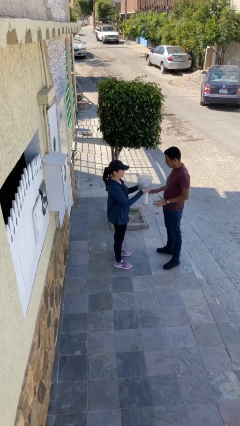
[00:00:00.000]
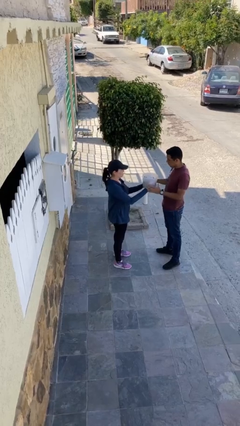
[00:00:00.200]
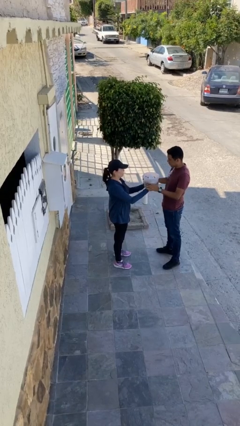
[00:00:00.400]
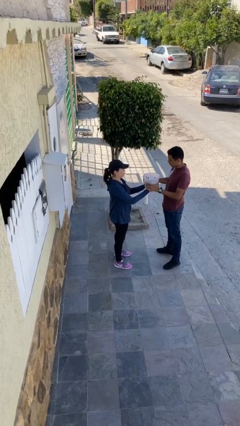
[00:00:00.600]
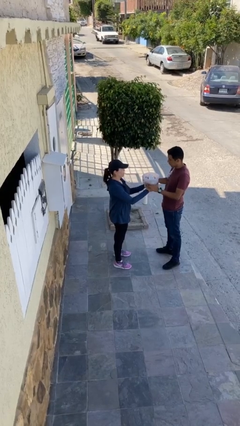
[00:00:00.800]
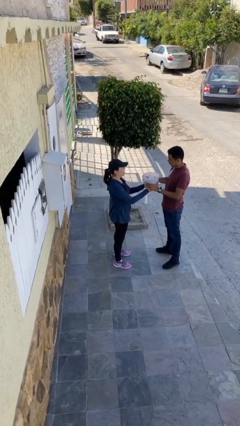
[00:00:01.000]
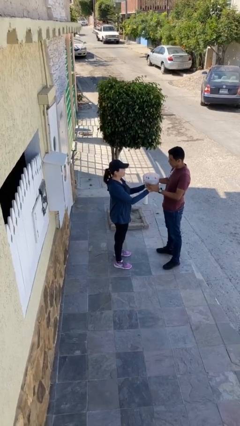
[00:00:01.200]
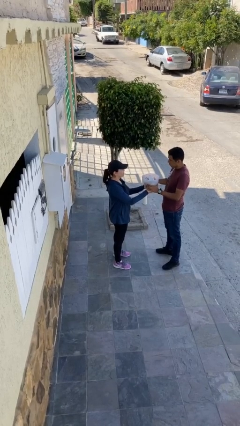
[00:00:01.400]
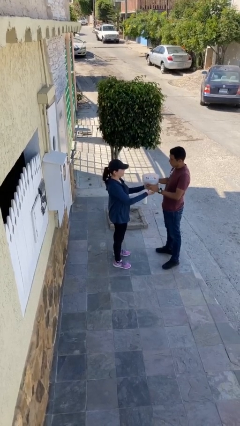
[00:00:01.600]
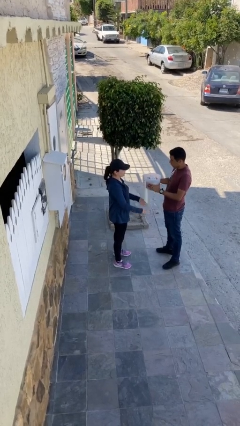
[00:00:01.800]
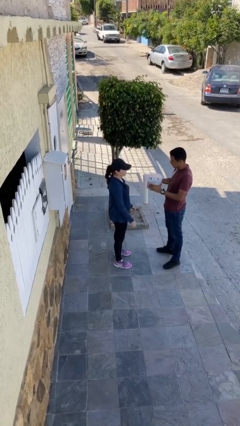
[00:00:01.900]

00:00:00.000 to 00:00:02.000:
person transfers object to person

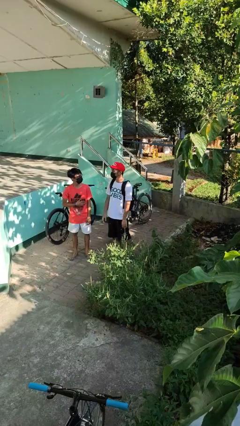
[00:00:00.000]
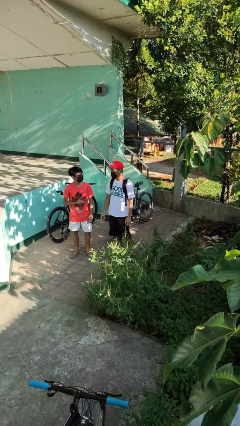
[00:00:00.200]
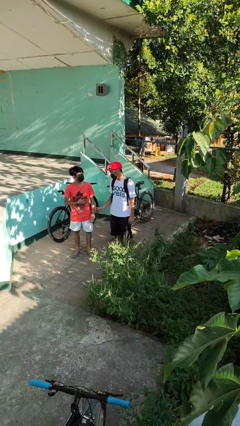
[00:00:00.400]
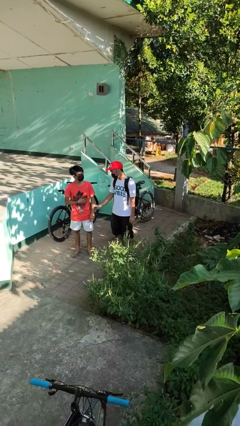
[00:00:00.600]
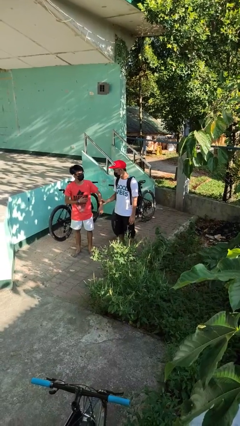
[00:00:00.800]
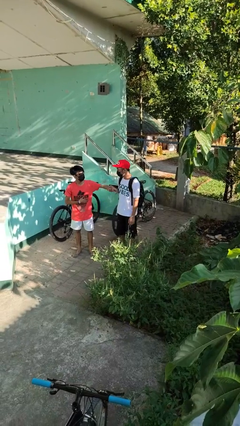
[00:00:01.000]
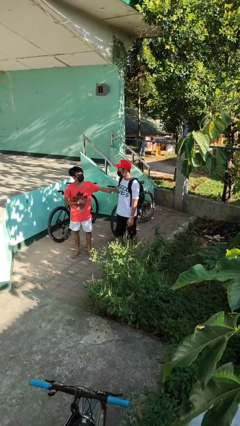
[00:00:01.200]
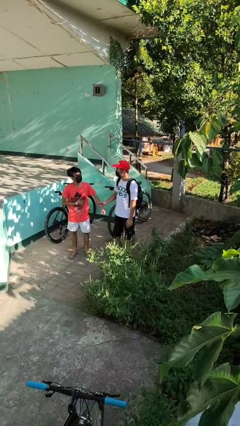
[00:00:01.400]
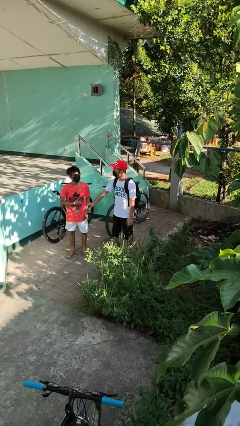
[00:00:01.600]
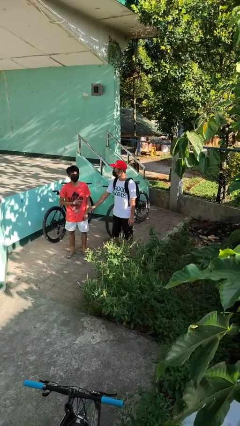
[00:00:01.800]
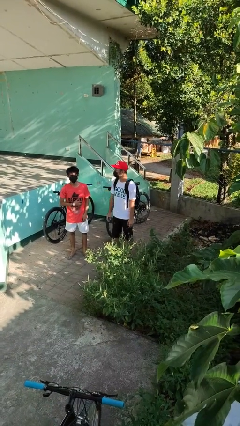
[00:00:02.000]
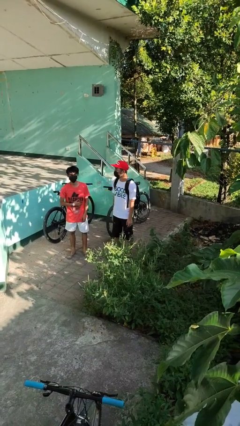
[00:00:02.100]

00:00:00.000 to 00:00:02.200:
person grabs person by forearm

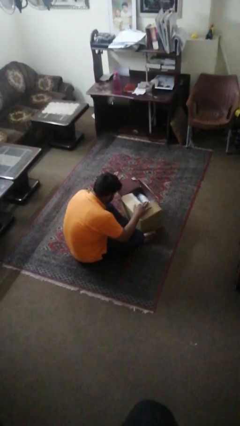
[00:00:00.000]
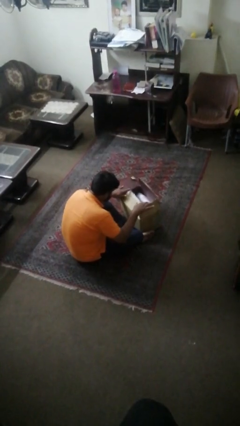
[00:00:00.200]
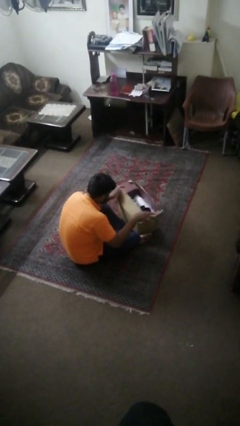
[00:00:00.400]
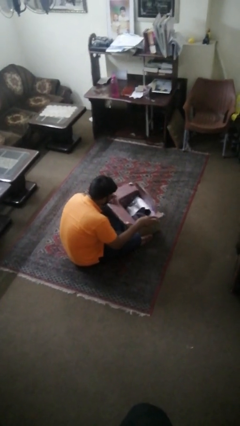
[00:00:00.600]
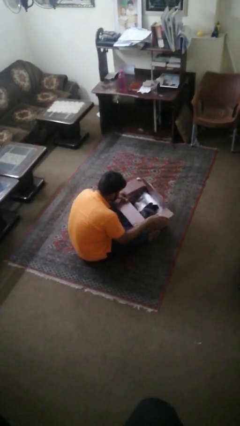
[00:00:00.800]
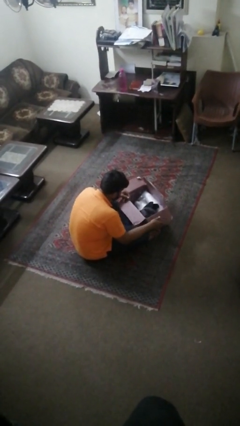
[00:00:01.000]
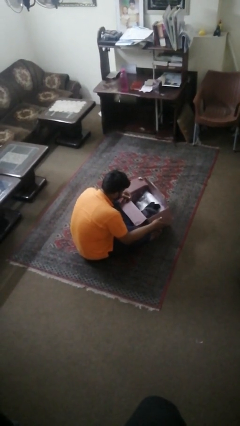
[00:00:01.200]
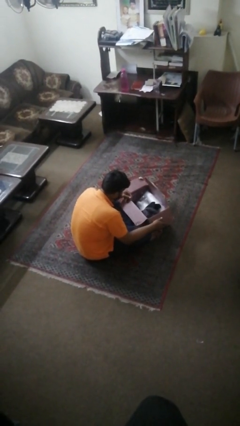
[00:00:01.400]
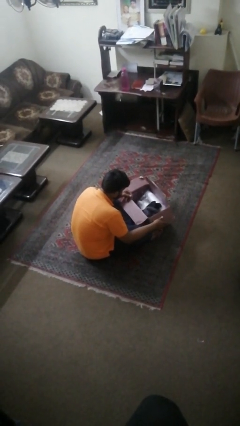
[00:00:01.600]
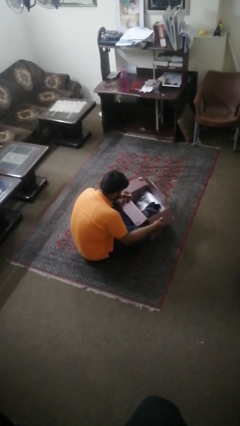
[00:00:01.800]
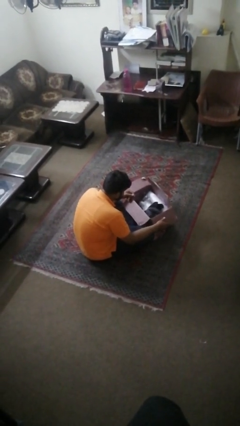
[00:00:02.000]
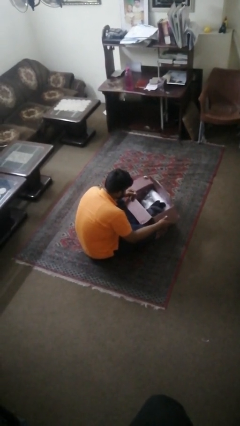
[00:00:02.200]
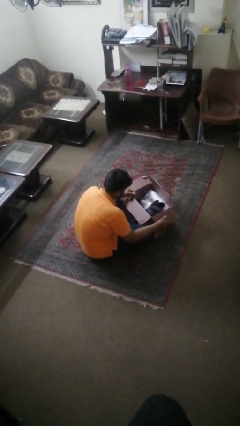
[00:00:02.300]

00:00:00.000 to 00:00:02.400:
person opens box

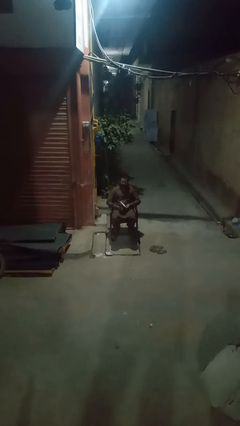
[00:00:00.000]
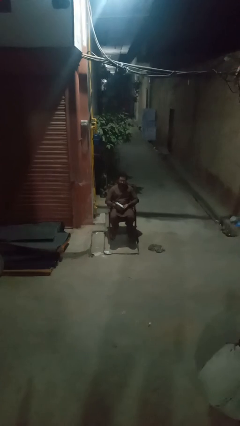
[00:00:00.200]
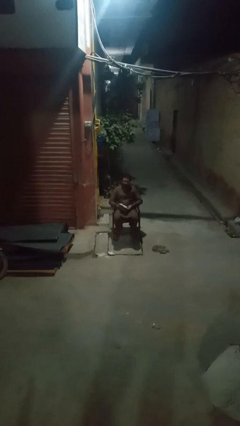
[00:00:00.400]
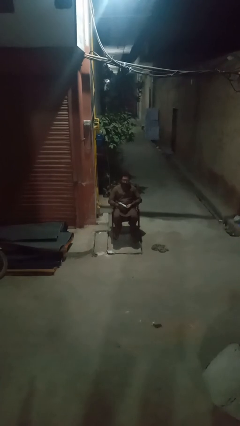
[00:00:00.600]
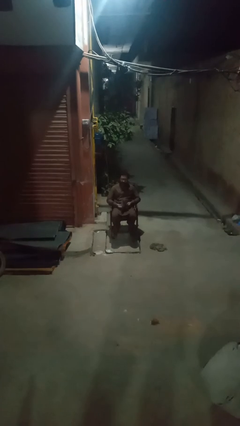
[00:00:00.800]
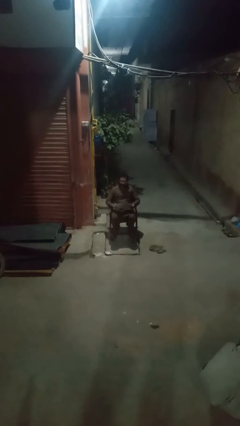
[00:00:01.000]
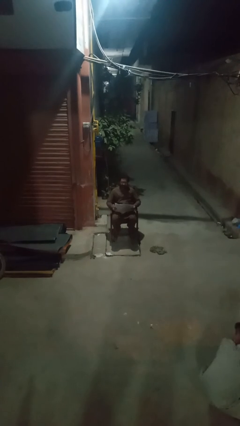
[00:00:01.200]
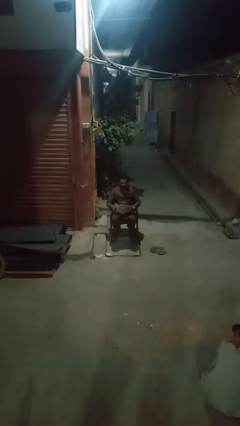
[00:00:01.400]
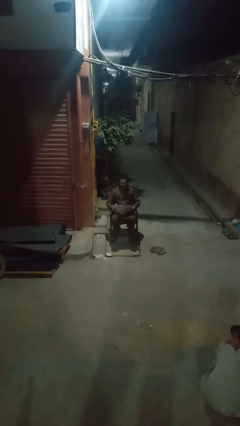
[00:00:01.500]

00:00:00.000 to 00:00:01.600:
person reads magazine

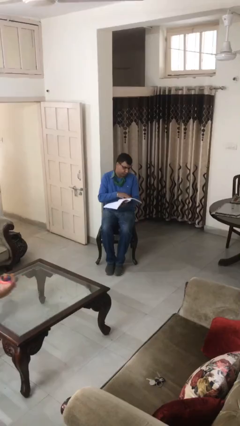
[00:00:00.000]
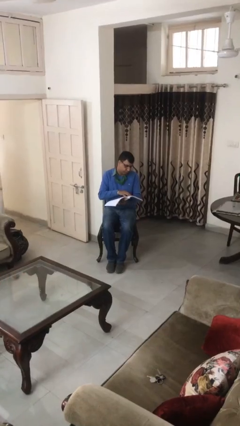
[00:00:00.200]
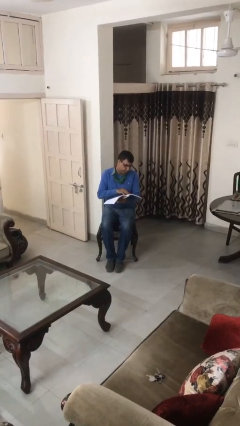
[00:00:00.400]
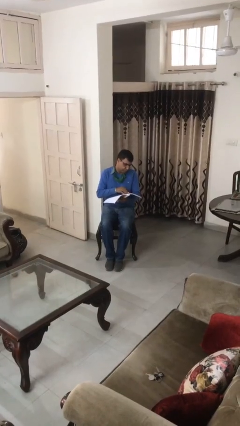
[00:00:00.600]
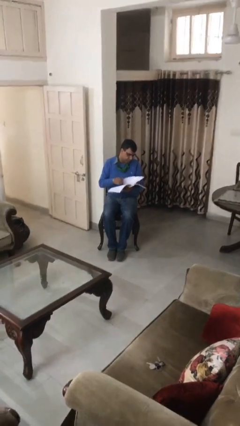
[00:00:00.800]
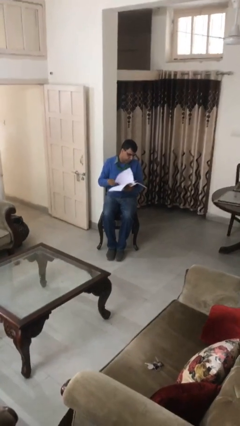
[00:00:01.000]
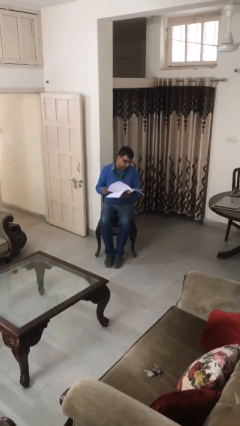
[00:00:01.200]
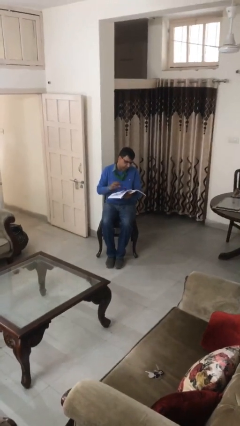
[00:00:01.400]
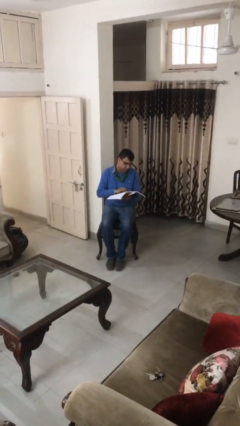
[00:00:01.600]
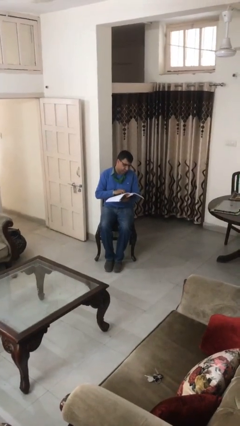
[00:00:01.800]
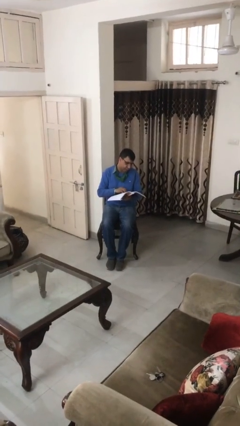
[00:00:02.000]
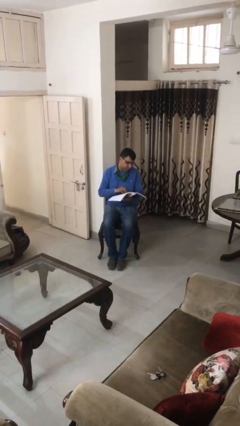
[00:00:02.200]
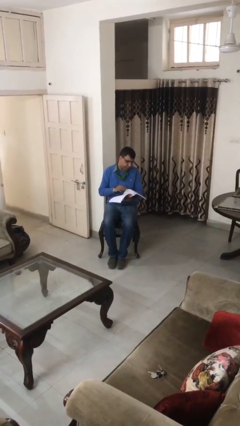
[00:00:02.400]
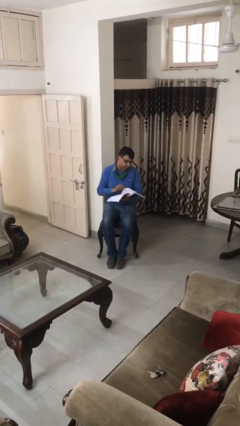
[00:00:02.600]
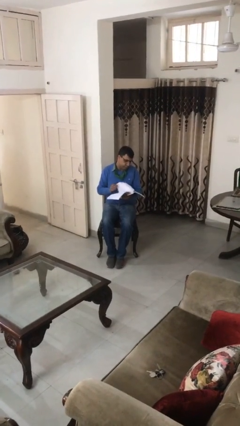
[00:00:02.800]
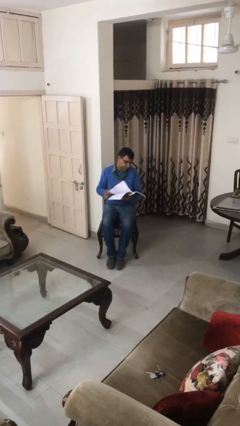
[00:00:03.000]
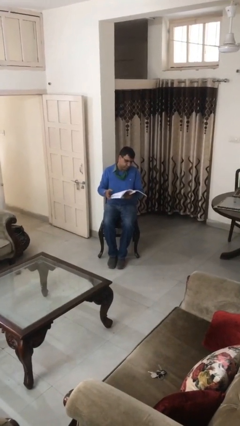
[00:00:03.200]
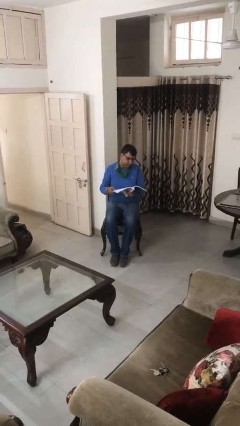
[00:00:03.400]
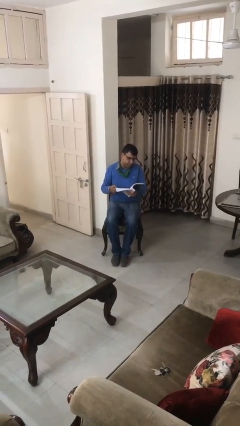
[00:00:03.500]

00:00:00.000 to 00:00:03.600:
person reads document

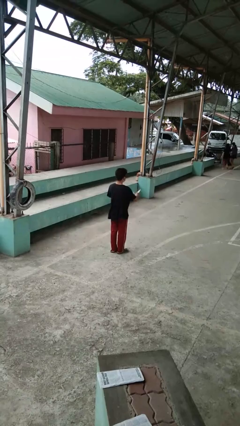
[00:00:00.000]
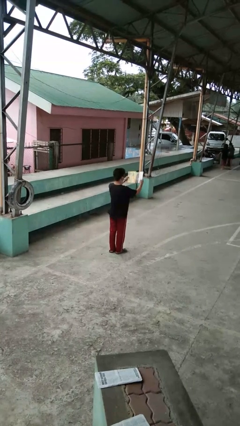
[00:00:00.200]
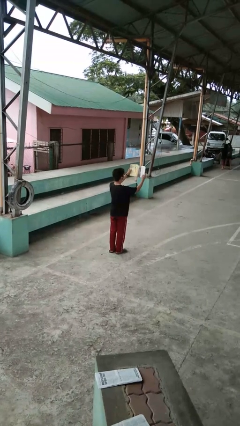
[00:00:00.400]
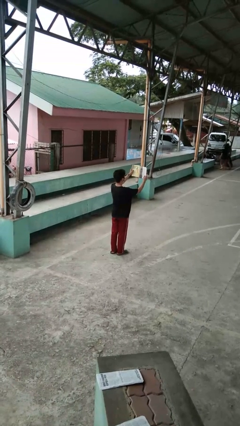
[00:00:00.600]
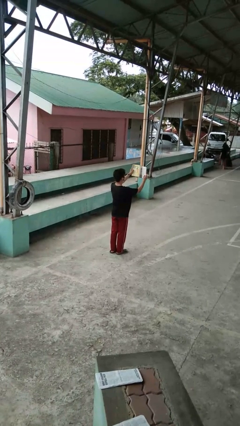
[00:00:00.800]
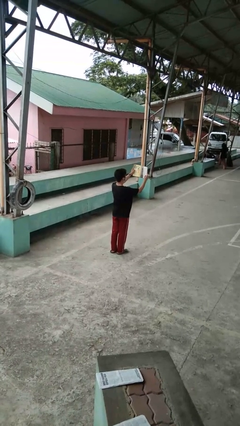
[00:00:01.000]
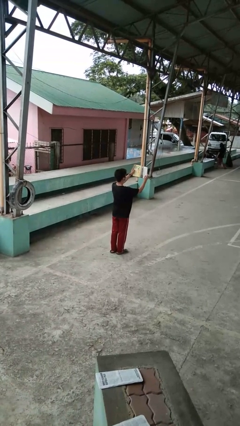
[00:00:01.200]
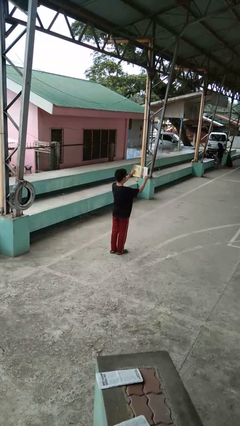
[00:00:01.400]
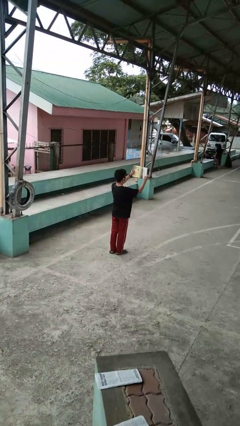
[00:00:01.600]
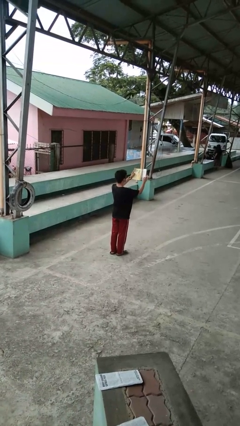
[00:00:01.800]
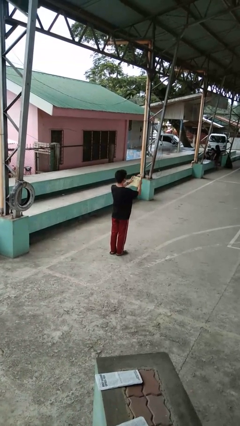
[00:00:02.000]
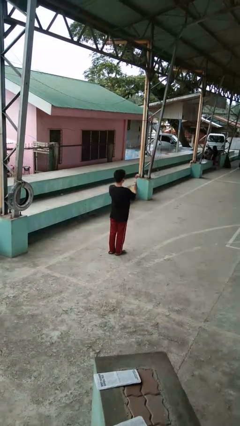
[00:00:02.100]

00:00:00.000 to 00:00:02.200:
person reads book

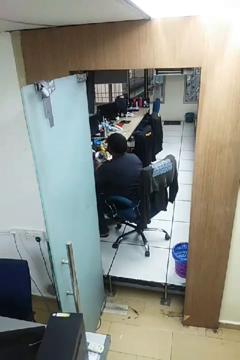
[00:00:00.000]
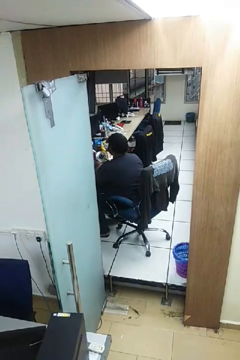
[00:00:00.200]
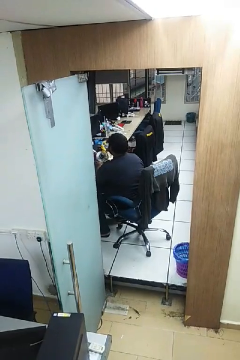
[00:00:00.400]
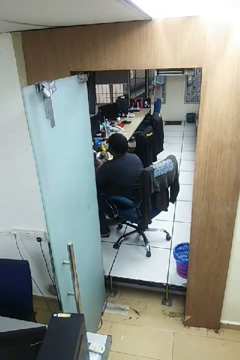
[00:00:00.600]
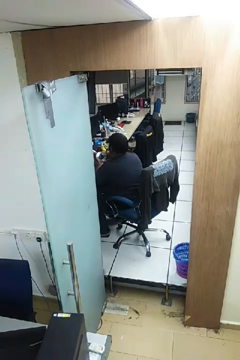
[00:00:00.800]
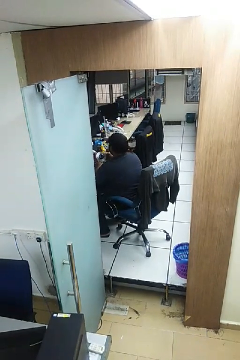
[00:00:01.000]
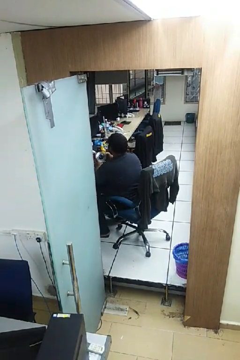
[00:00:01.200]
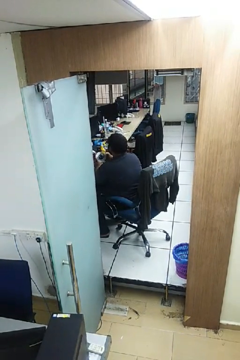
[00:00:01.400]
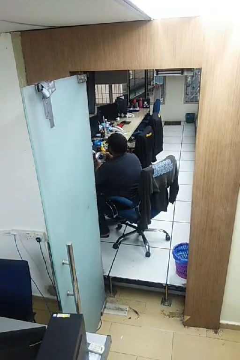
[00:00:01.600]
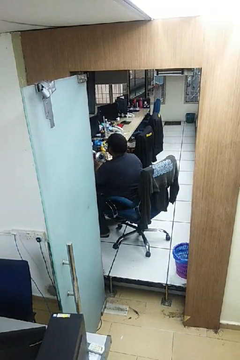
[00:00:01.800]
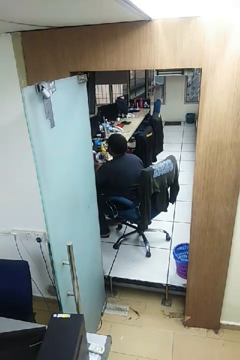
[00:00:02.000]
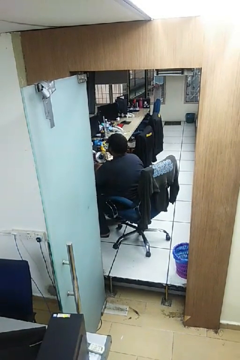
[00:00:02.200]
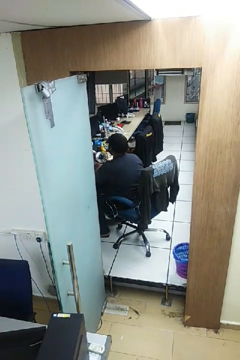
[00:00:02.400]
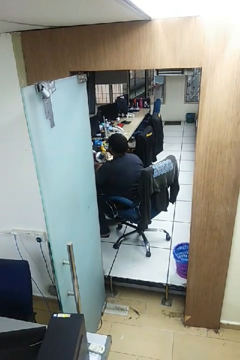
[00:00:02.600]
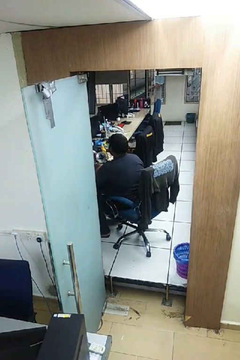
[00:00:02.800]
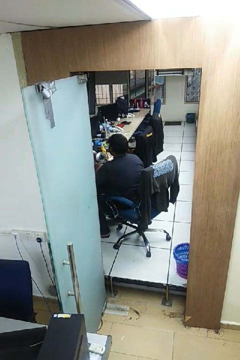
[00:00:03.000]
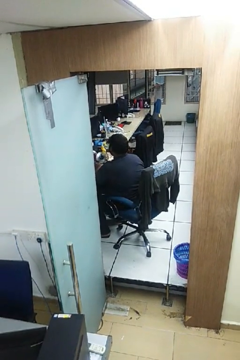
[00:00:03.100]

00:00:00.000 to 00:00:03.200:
person turns off fan
